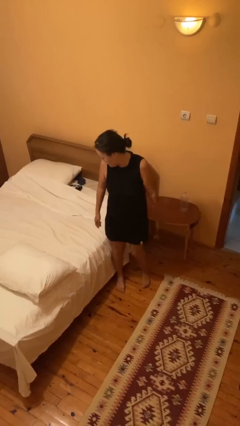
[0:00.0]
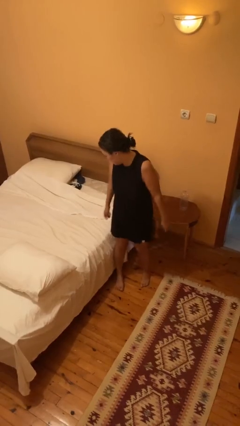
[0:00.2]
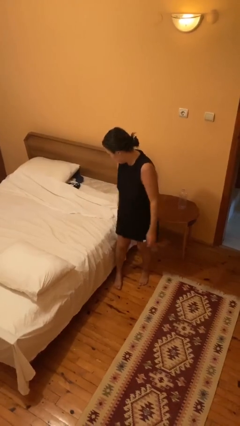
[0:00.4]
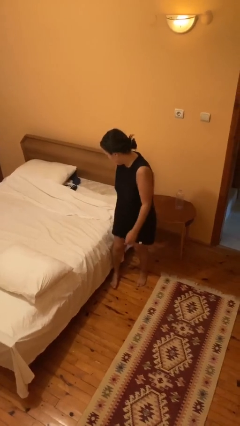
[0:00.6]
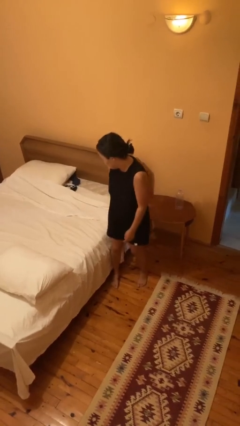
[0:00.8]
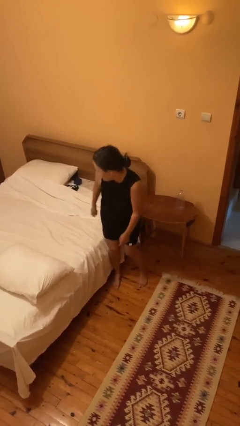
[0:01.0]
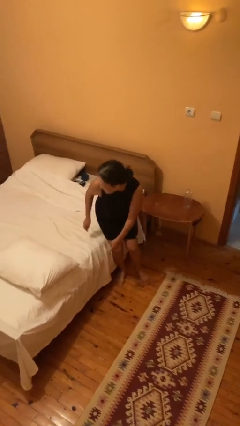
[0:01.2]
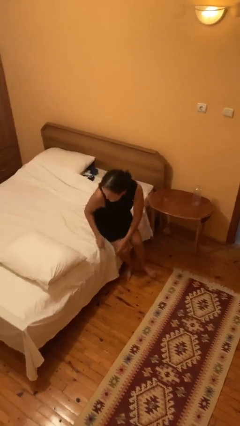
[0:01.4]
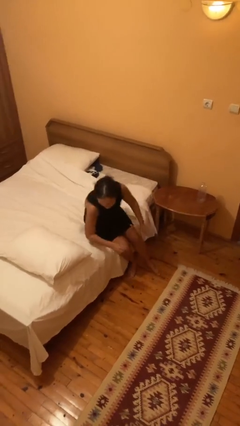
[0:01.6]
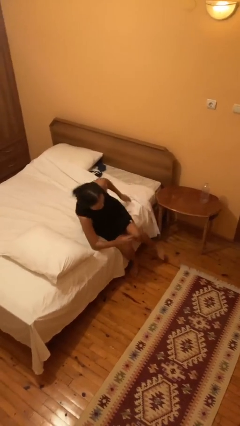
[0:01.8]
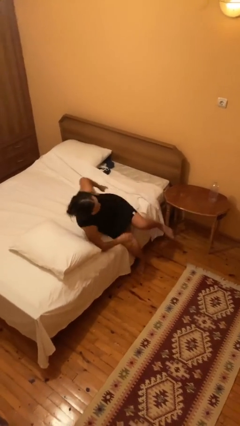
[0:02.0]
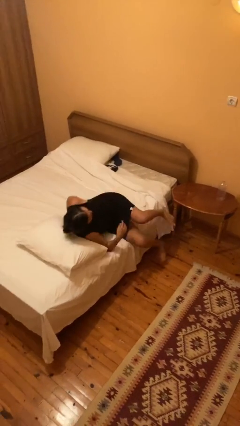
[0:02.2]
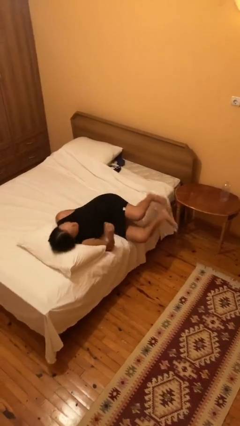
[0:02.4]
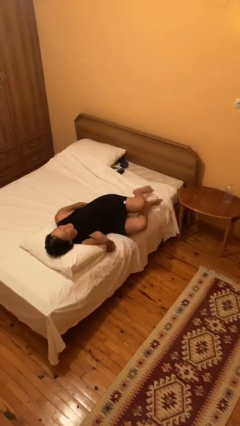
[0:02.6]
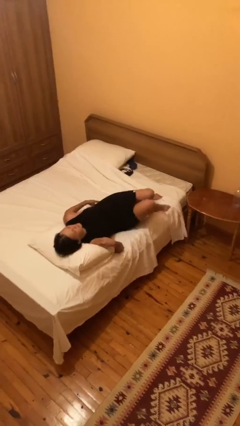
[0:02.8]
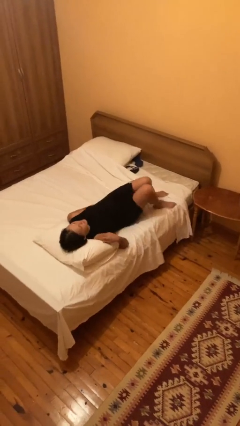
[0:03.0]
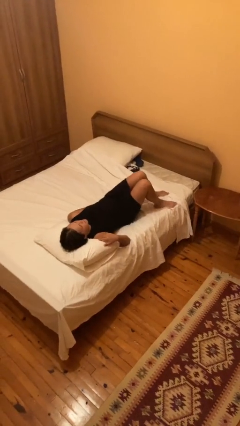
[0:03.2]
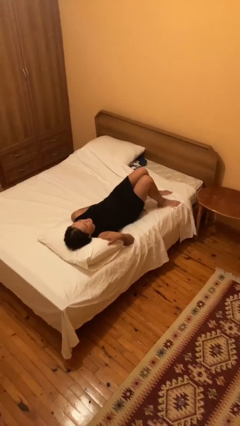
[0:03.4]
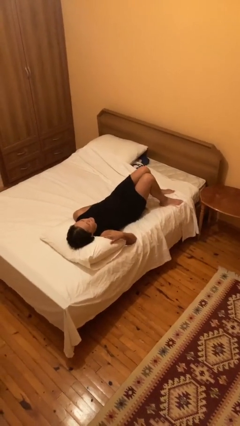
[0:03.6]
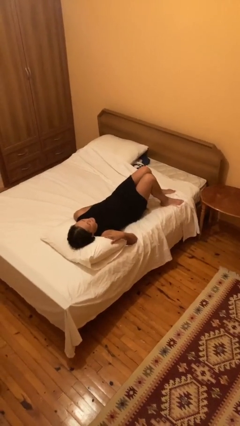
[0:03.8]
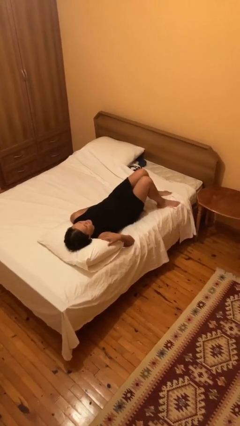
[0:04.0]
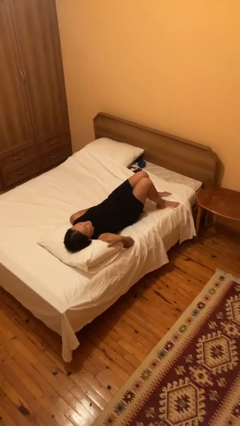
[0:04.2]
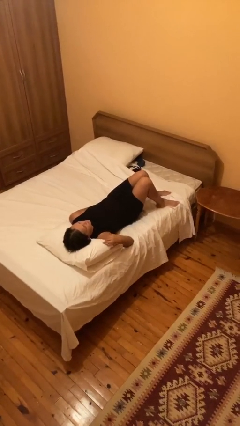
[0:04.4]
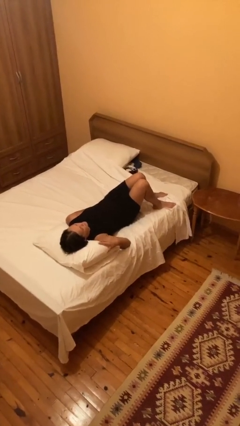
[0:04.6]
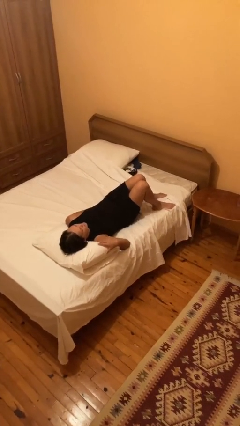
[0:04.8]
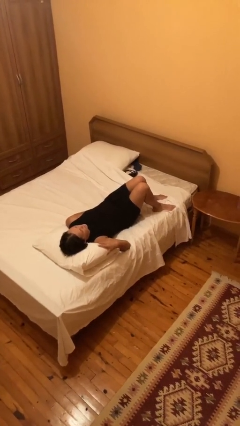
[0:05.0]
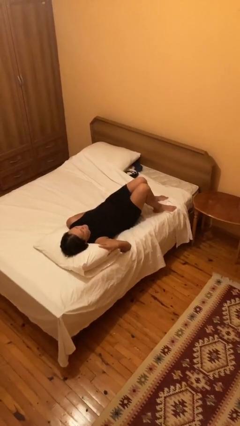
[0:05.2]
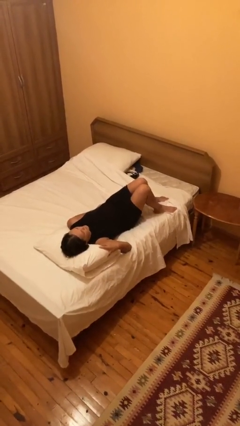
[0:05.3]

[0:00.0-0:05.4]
person lies down on bed

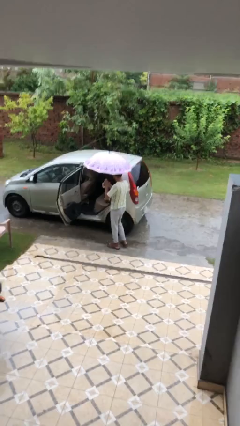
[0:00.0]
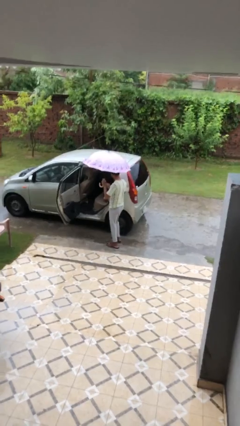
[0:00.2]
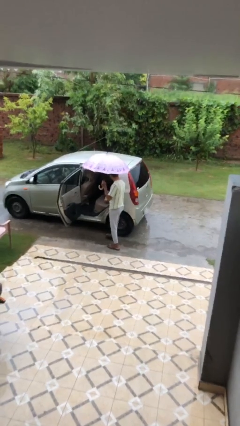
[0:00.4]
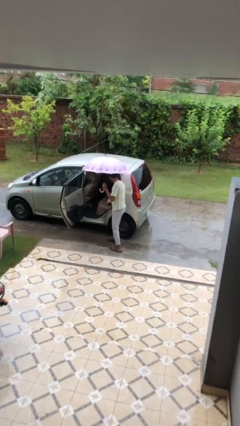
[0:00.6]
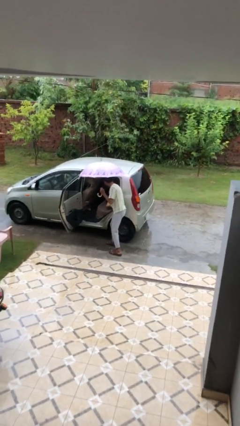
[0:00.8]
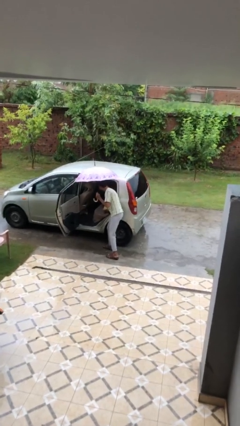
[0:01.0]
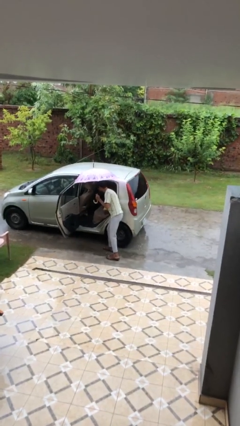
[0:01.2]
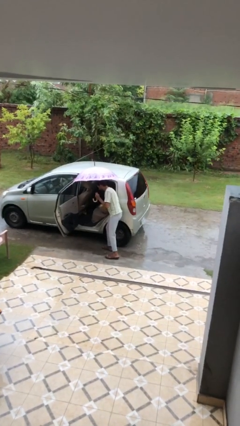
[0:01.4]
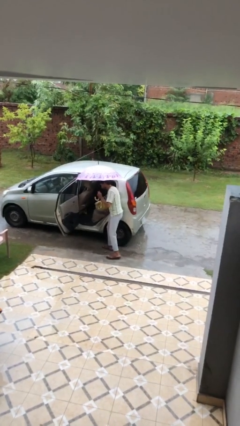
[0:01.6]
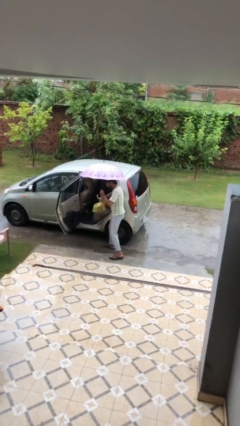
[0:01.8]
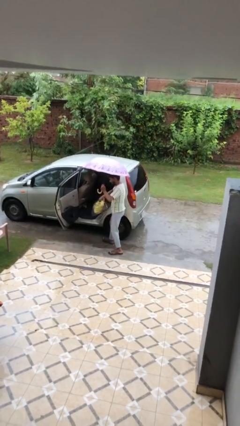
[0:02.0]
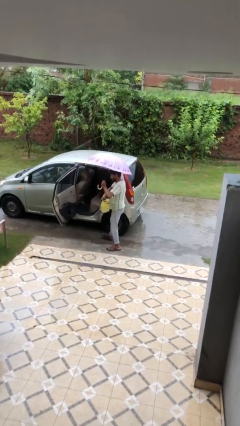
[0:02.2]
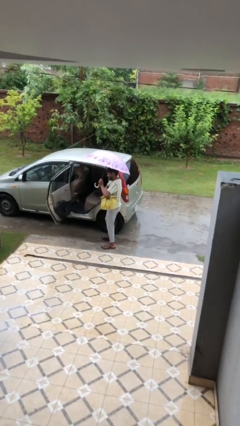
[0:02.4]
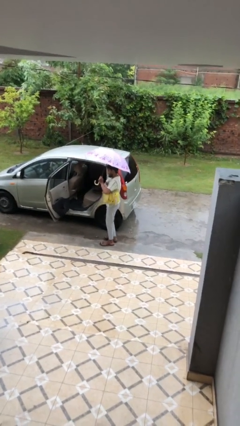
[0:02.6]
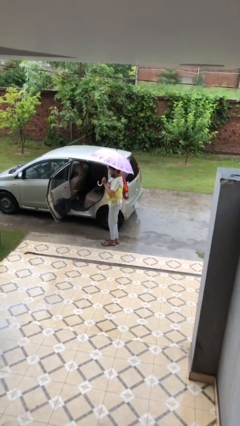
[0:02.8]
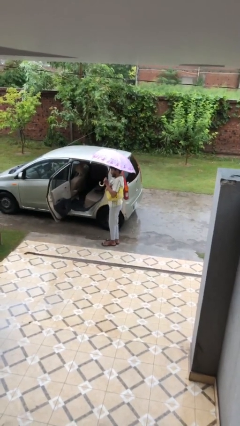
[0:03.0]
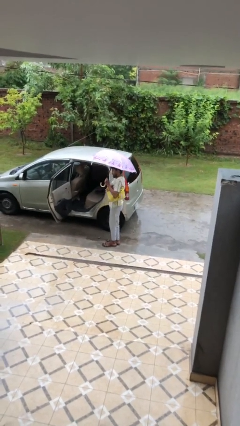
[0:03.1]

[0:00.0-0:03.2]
person unloads car

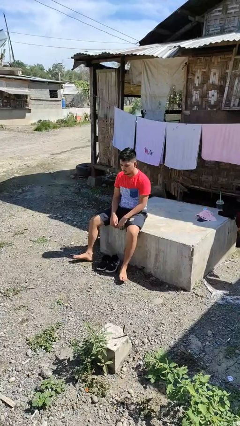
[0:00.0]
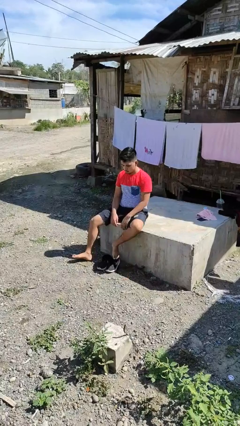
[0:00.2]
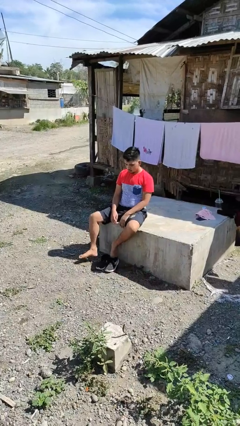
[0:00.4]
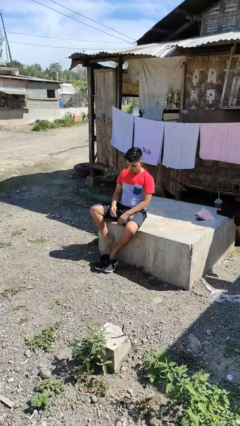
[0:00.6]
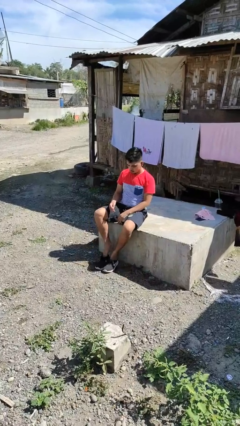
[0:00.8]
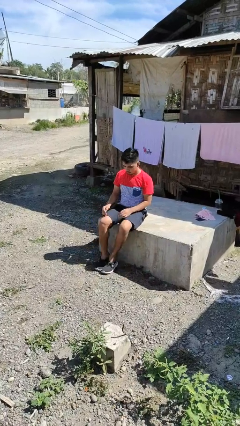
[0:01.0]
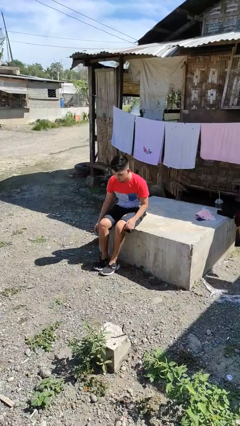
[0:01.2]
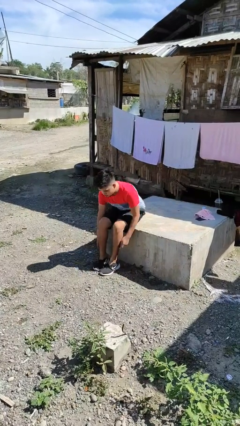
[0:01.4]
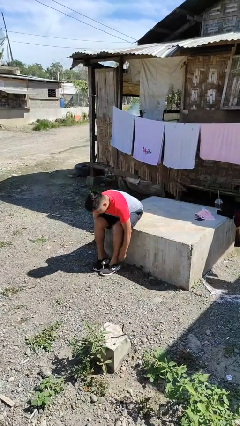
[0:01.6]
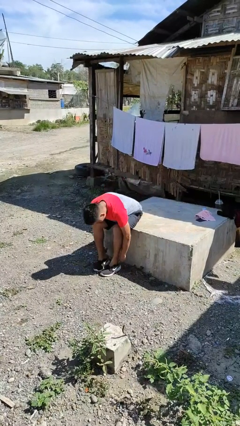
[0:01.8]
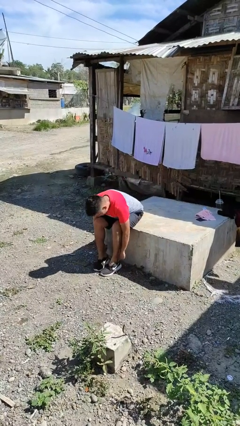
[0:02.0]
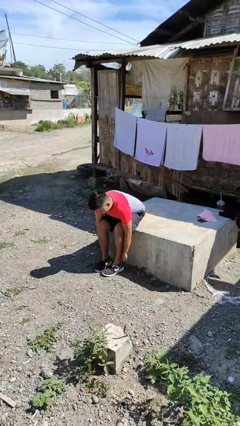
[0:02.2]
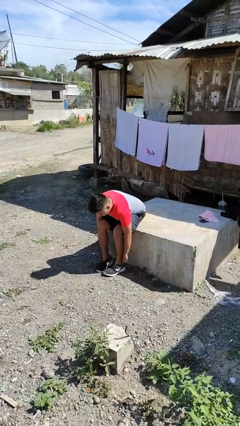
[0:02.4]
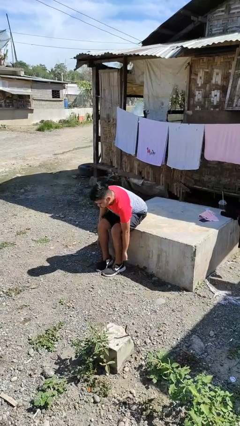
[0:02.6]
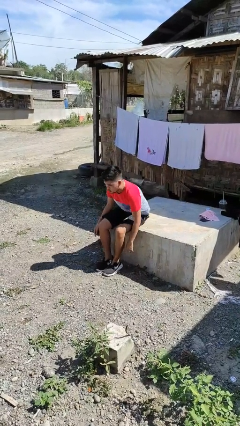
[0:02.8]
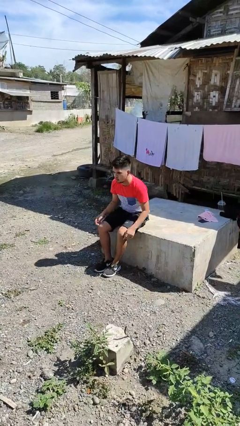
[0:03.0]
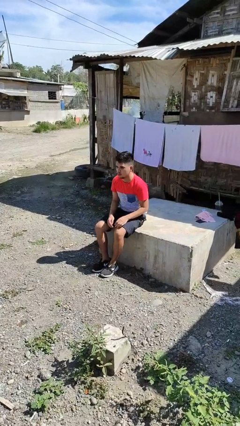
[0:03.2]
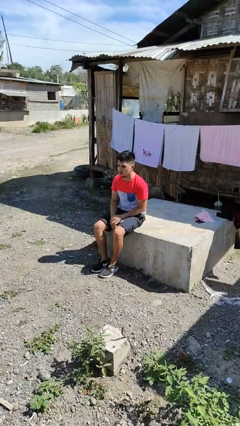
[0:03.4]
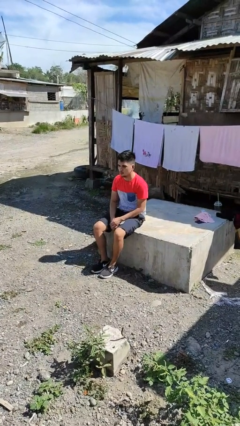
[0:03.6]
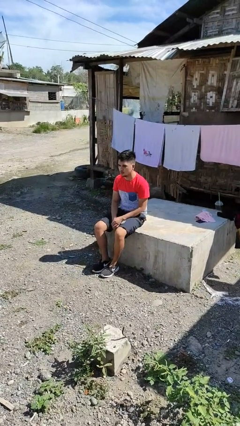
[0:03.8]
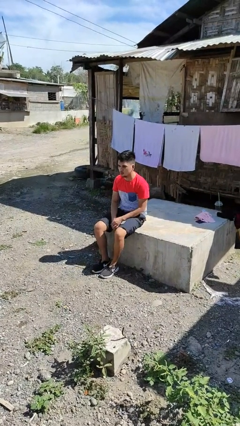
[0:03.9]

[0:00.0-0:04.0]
person puts on shoes

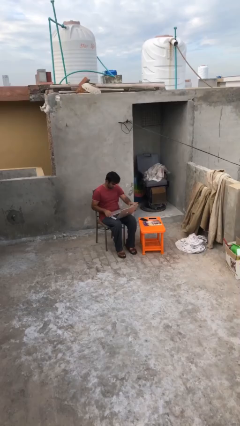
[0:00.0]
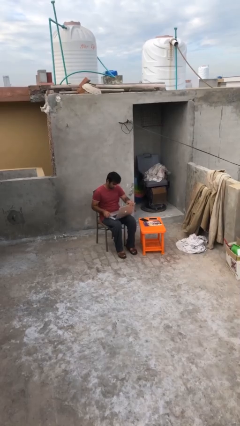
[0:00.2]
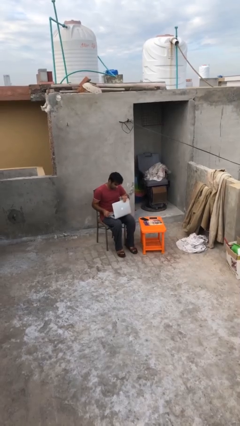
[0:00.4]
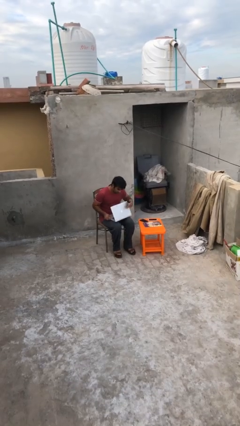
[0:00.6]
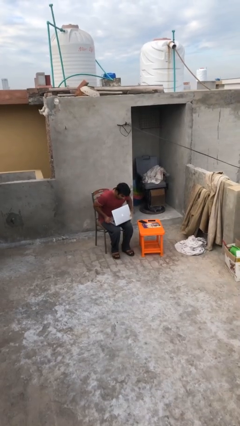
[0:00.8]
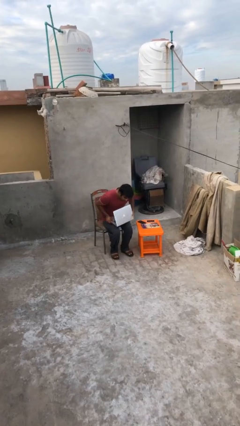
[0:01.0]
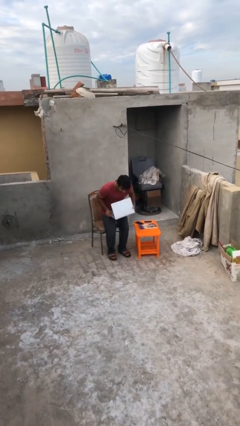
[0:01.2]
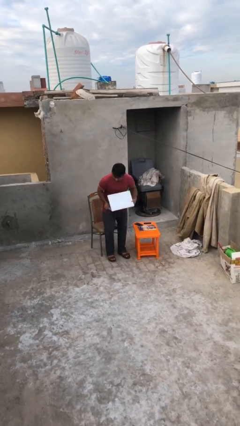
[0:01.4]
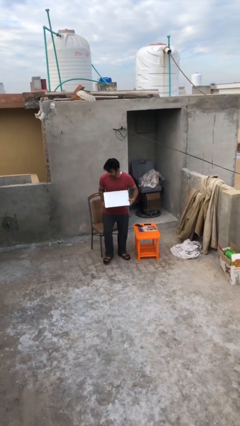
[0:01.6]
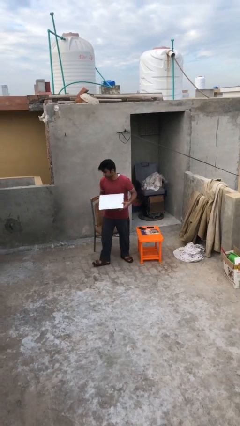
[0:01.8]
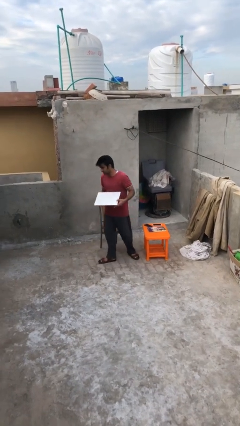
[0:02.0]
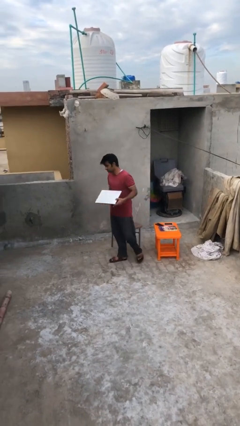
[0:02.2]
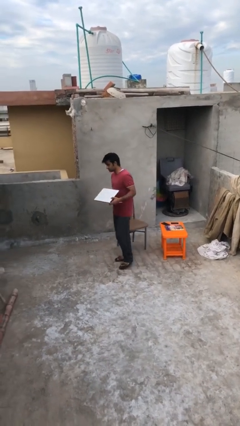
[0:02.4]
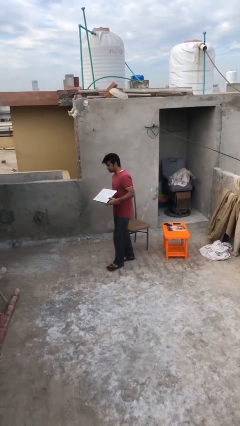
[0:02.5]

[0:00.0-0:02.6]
person stands up

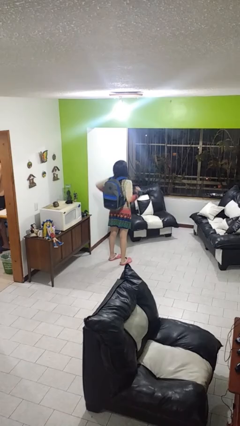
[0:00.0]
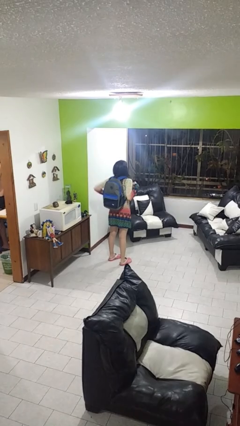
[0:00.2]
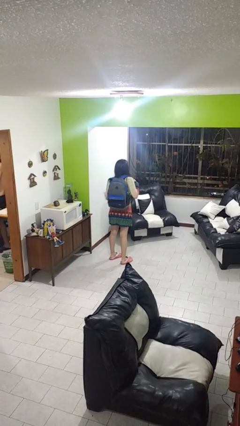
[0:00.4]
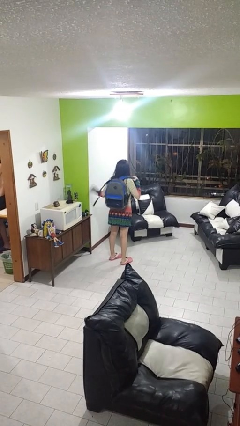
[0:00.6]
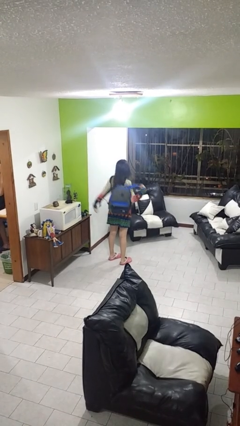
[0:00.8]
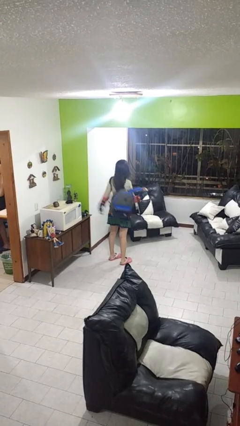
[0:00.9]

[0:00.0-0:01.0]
person takes off backpack

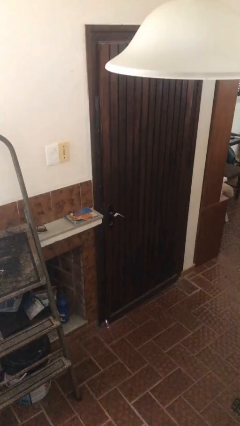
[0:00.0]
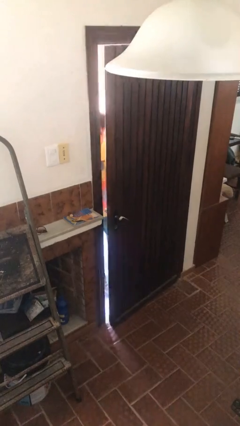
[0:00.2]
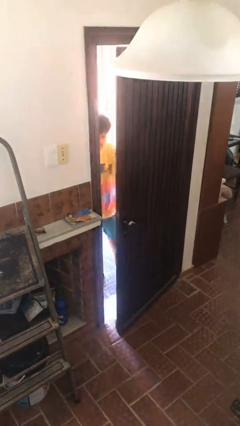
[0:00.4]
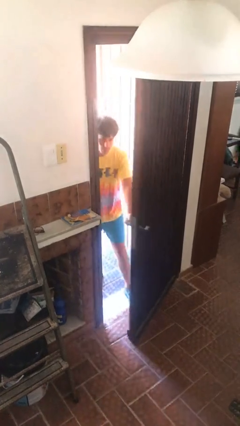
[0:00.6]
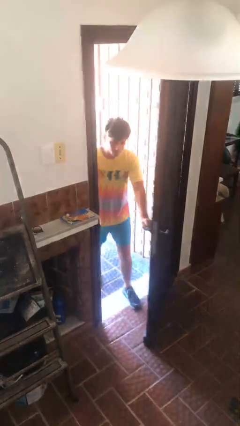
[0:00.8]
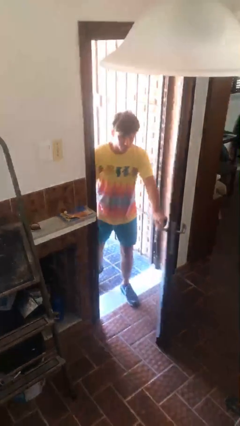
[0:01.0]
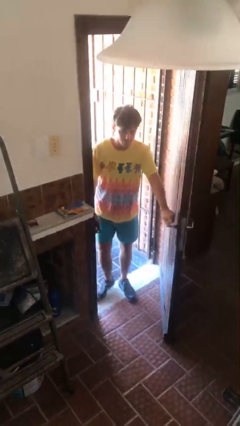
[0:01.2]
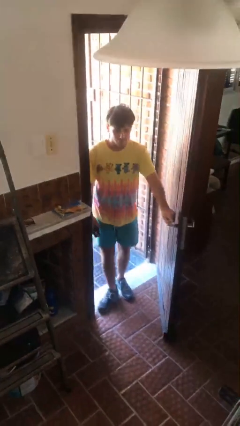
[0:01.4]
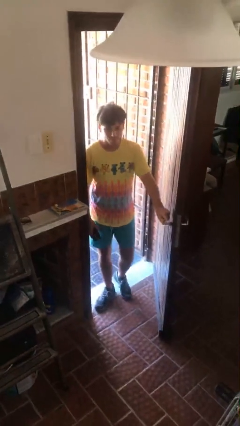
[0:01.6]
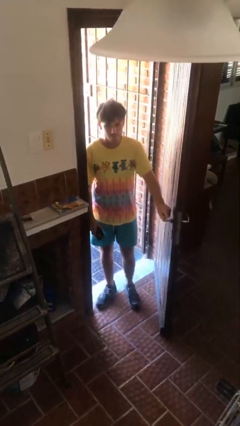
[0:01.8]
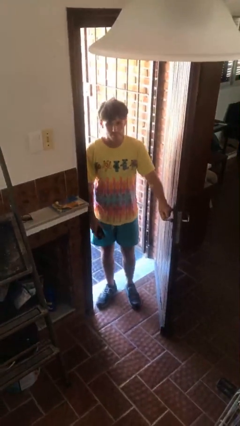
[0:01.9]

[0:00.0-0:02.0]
person opens facility door
